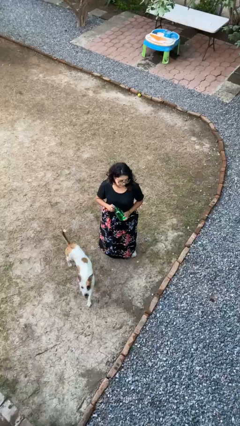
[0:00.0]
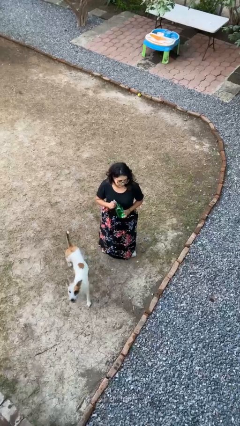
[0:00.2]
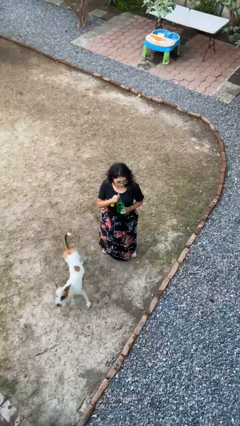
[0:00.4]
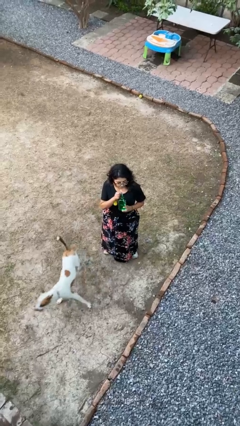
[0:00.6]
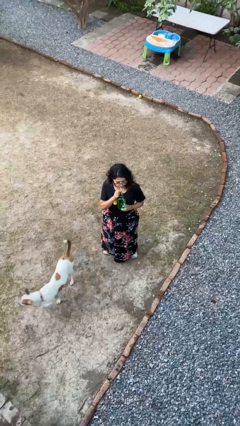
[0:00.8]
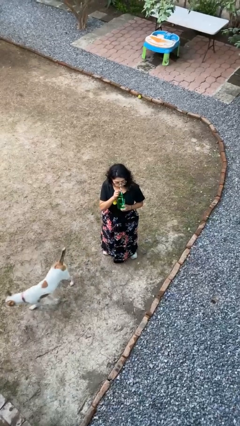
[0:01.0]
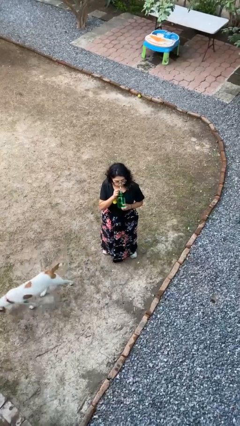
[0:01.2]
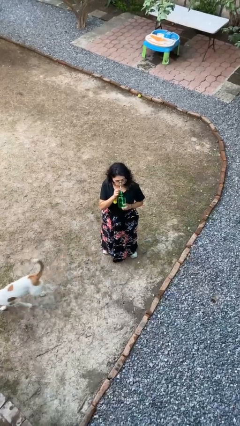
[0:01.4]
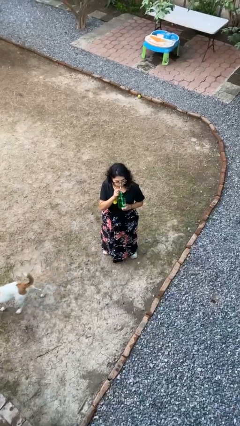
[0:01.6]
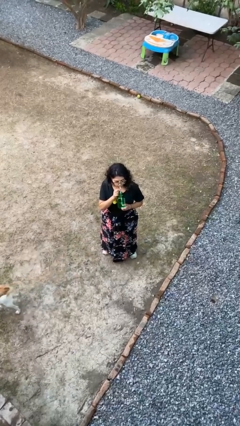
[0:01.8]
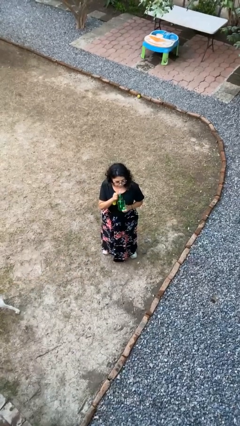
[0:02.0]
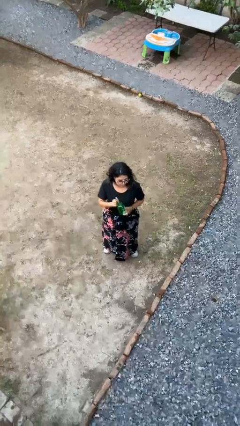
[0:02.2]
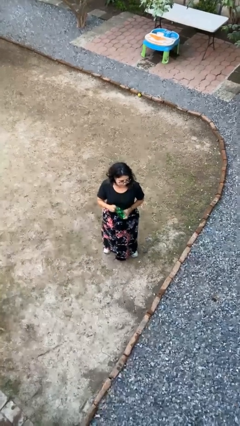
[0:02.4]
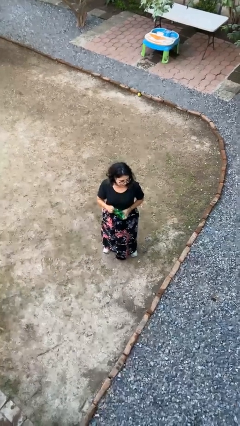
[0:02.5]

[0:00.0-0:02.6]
person drinks from straw

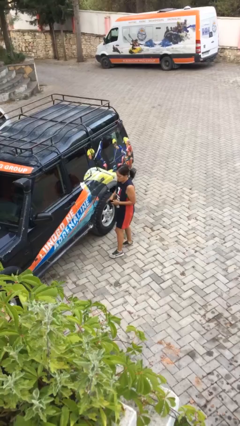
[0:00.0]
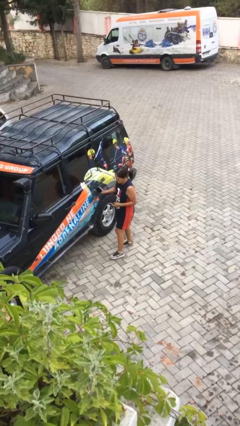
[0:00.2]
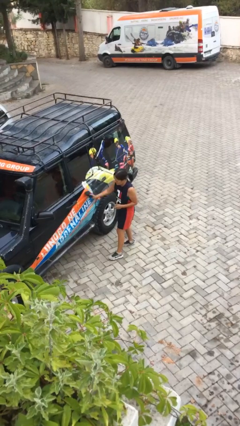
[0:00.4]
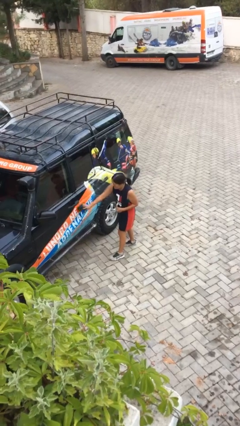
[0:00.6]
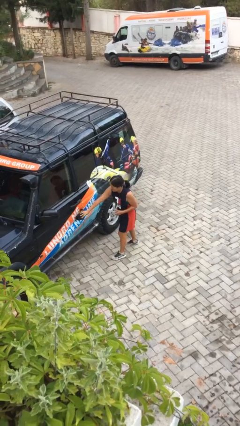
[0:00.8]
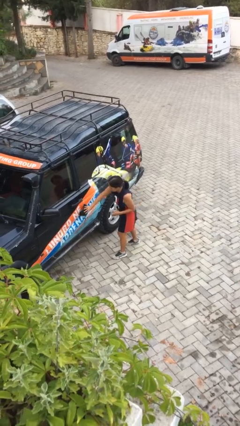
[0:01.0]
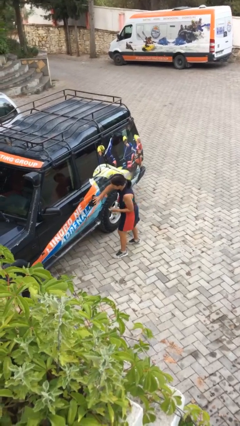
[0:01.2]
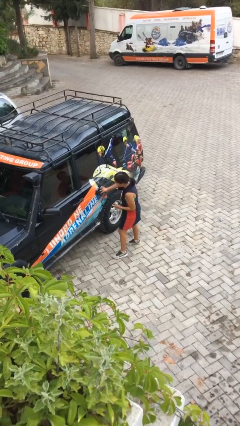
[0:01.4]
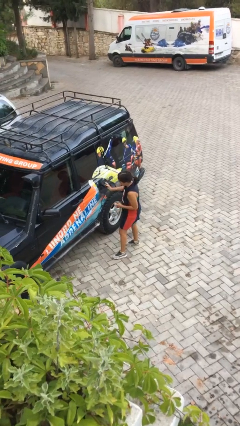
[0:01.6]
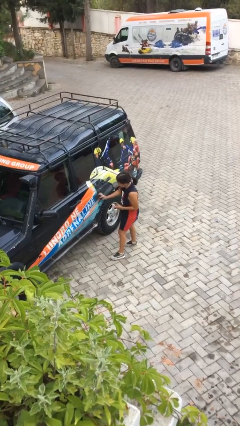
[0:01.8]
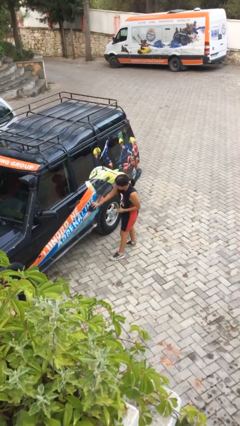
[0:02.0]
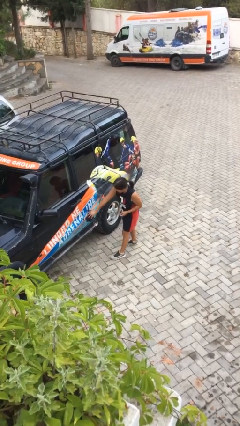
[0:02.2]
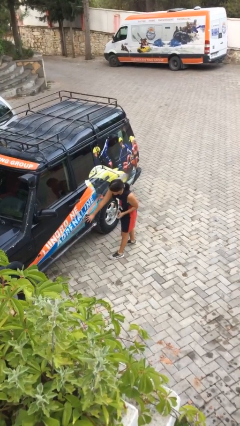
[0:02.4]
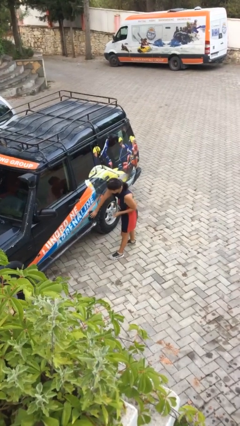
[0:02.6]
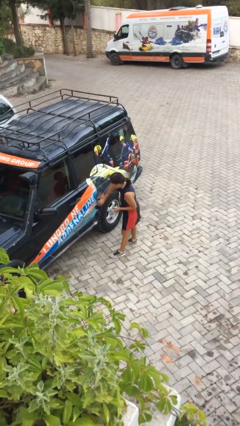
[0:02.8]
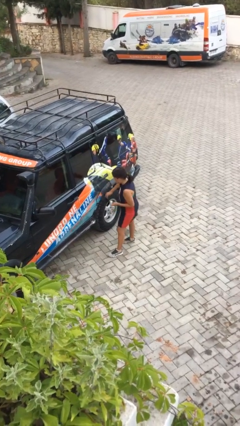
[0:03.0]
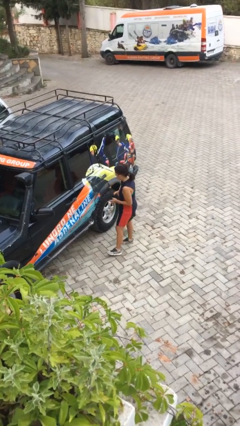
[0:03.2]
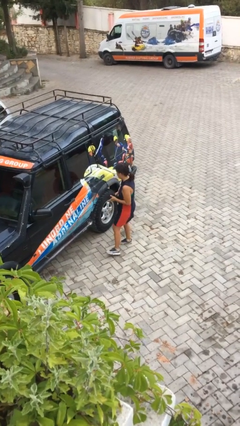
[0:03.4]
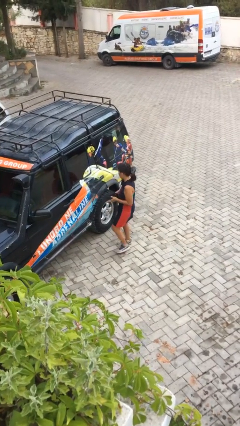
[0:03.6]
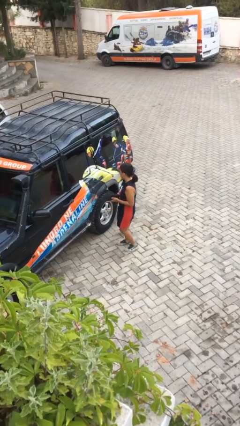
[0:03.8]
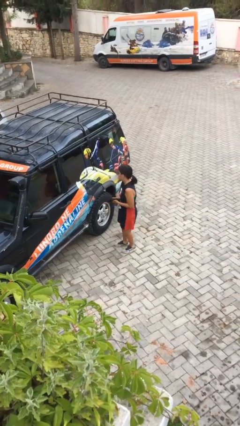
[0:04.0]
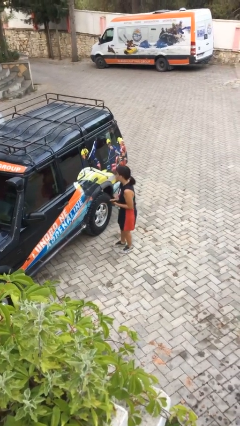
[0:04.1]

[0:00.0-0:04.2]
person polishes car with rag

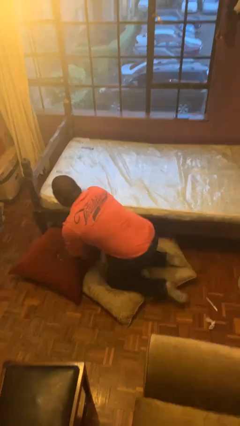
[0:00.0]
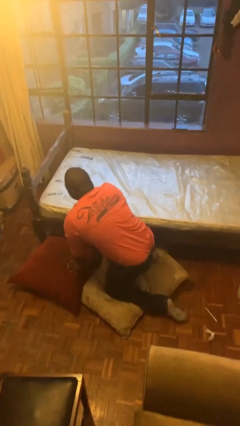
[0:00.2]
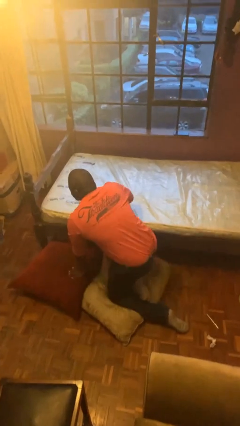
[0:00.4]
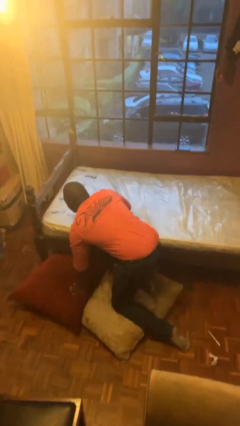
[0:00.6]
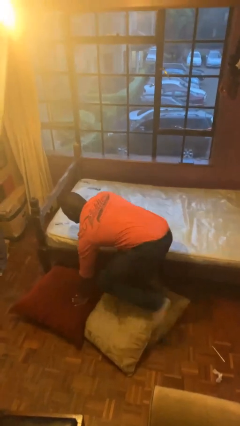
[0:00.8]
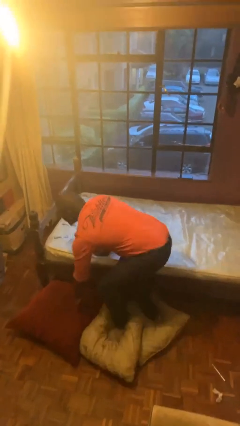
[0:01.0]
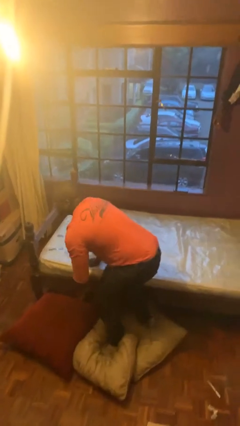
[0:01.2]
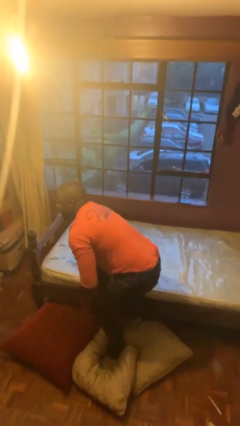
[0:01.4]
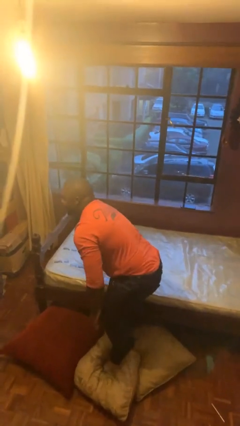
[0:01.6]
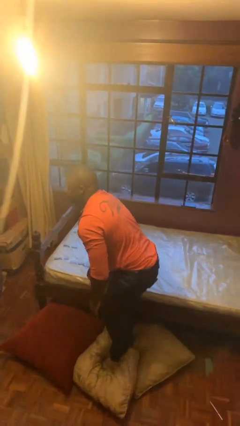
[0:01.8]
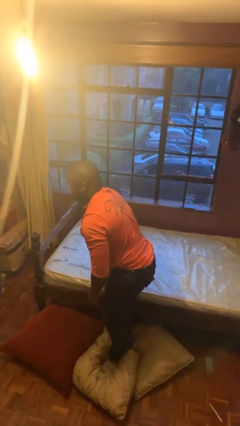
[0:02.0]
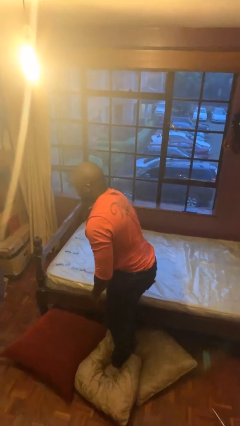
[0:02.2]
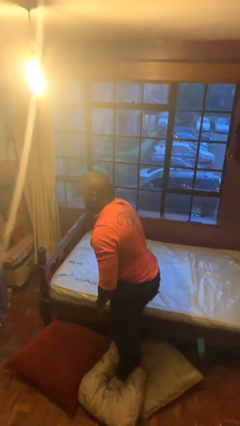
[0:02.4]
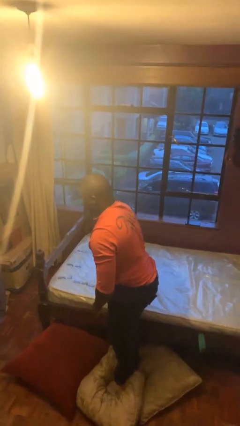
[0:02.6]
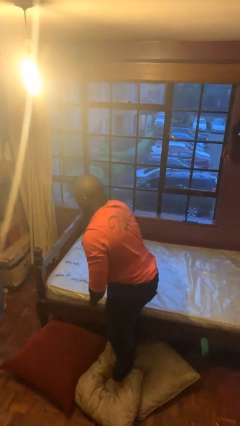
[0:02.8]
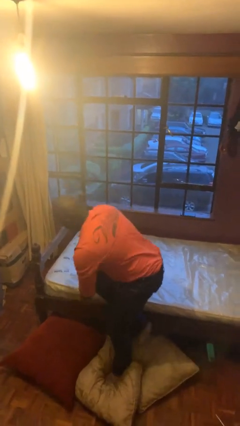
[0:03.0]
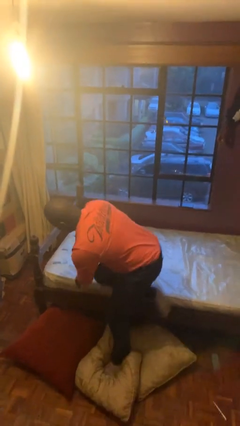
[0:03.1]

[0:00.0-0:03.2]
person stands up from floor

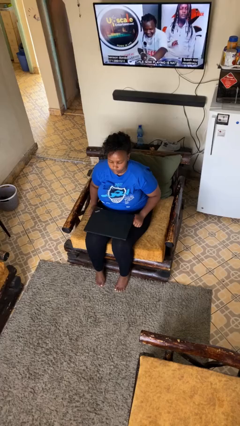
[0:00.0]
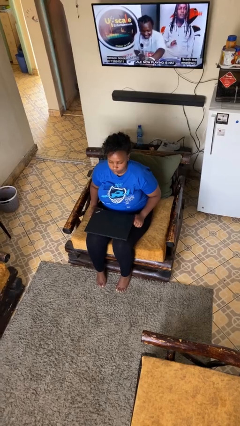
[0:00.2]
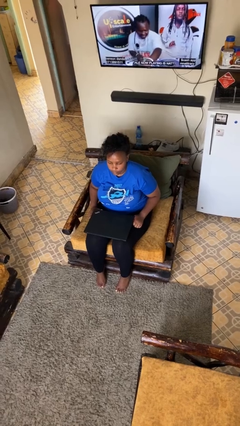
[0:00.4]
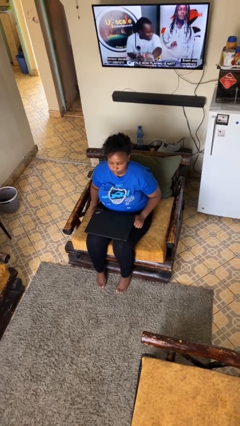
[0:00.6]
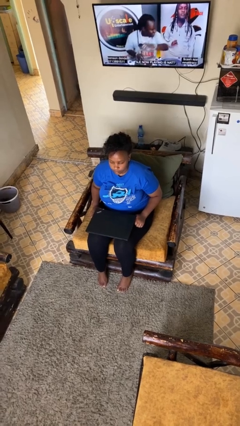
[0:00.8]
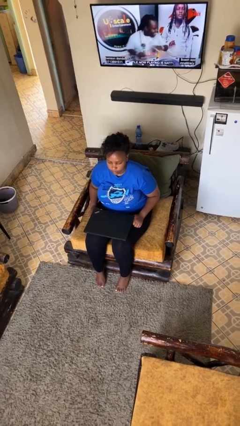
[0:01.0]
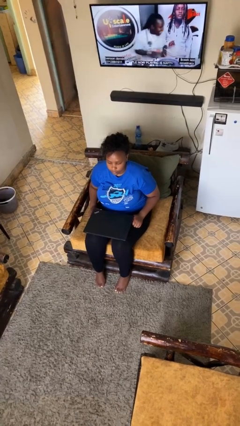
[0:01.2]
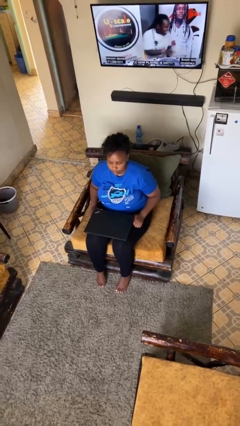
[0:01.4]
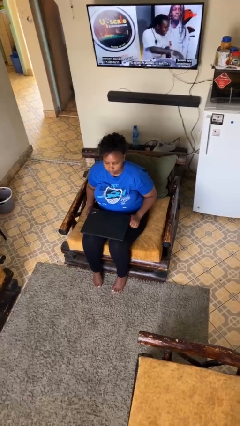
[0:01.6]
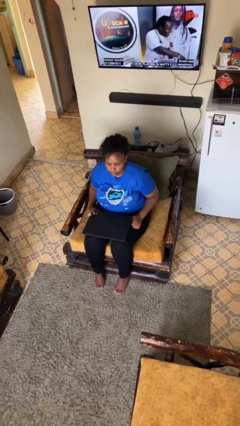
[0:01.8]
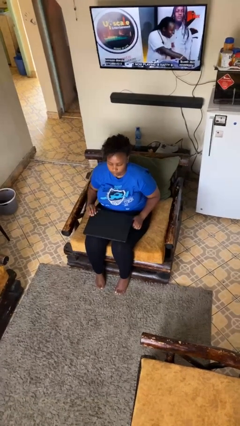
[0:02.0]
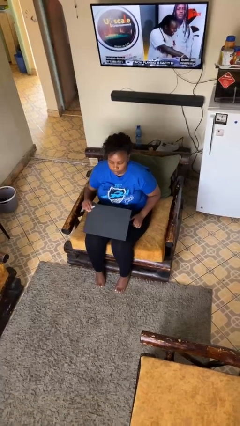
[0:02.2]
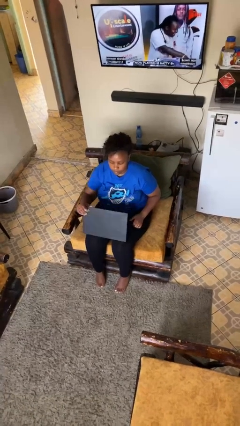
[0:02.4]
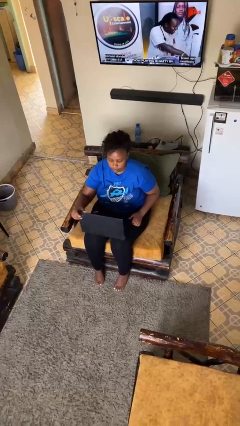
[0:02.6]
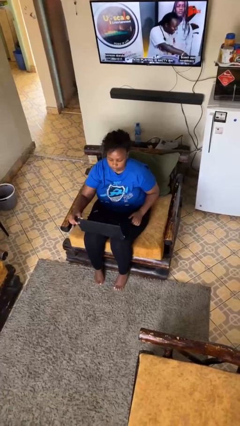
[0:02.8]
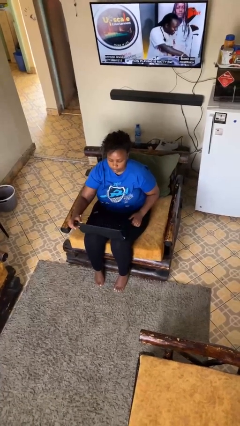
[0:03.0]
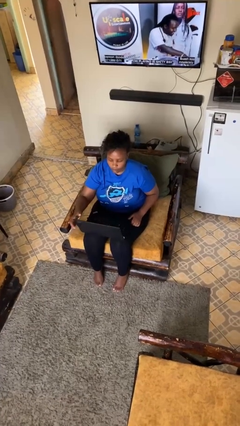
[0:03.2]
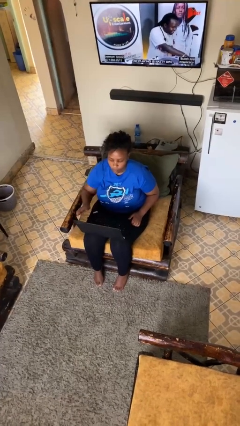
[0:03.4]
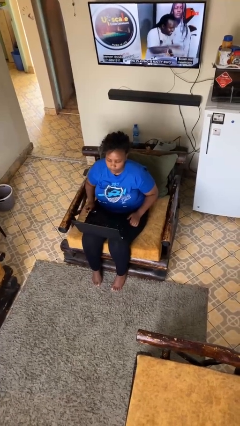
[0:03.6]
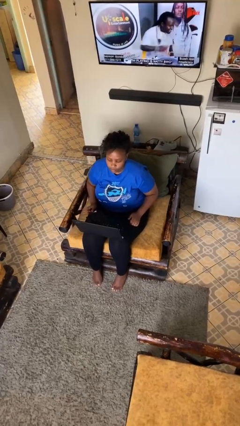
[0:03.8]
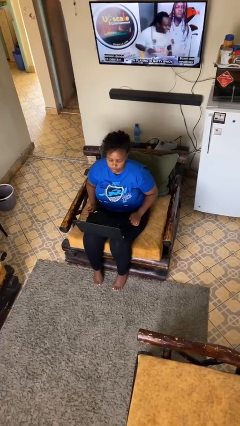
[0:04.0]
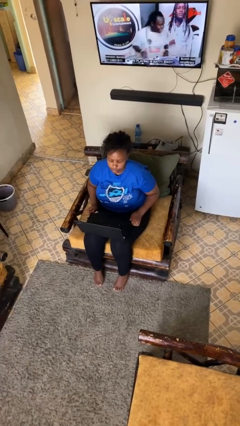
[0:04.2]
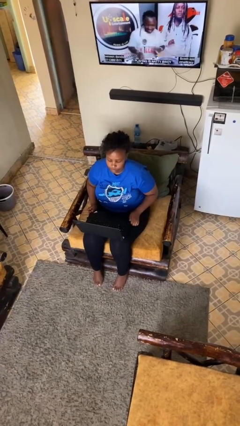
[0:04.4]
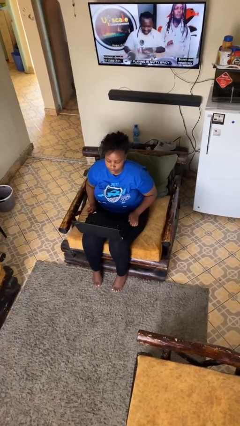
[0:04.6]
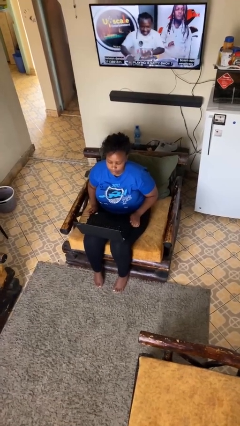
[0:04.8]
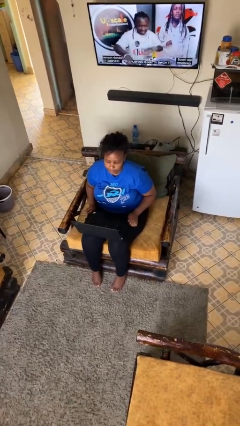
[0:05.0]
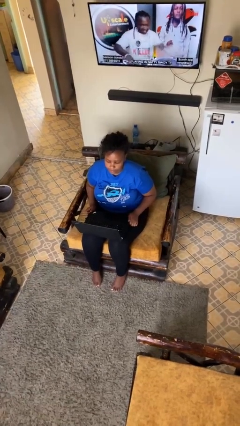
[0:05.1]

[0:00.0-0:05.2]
person opens laptop

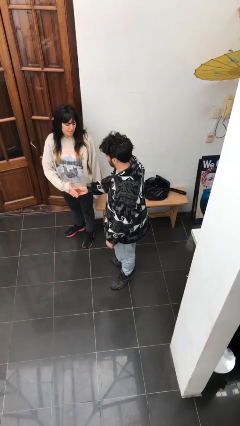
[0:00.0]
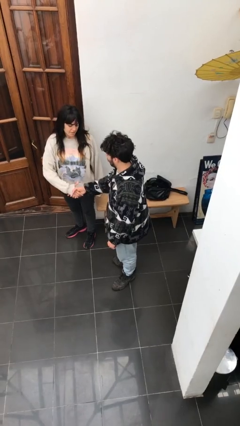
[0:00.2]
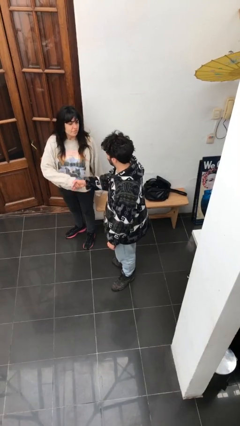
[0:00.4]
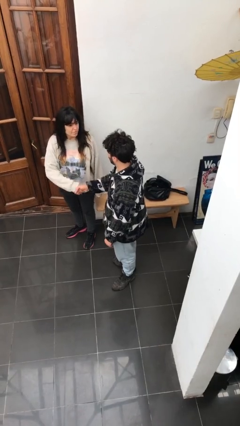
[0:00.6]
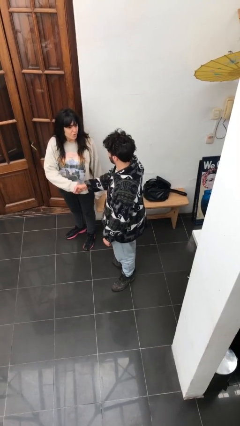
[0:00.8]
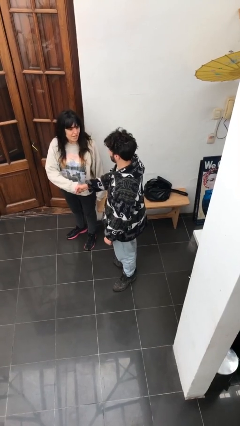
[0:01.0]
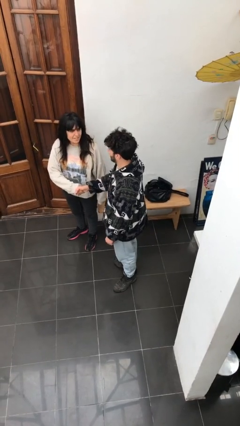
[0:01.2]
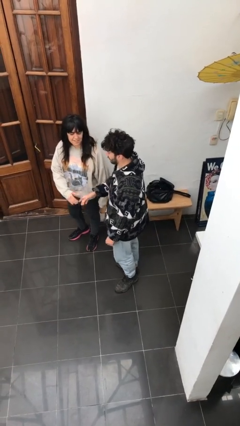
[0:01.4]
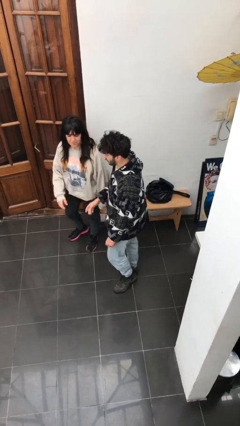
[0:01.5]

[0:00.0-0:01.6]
person shakes hand

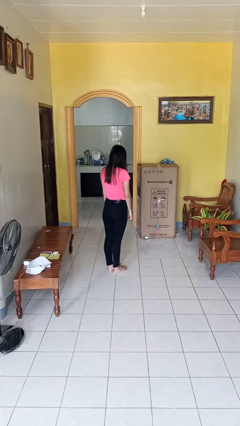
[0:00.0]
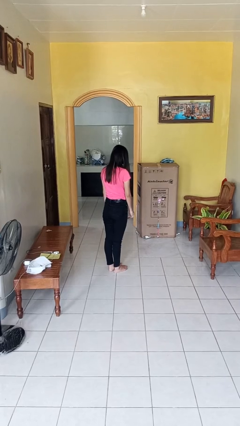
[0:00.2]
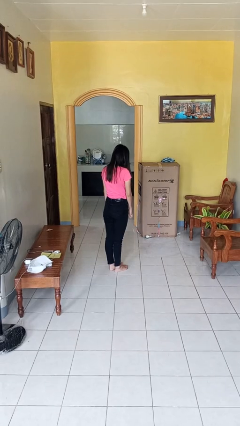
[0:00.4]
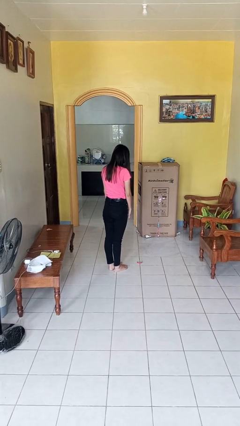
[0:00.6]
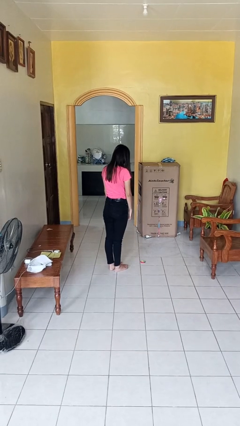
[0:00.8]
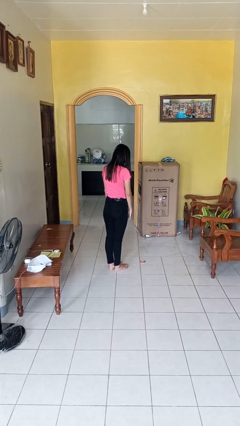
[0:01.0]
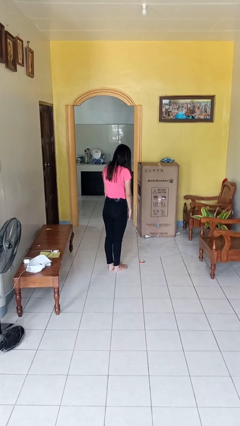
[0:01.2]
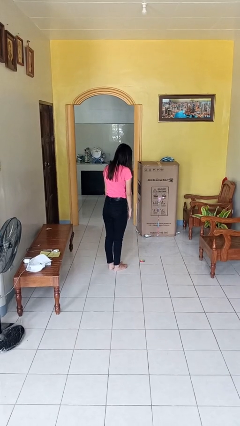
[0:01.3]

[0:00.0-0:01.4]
person throws object to ground
